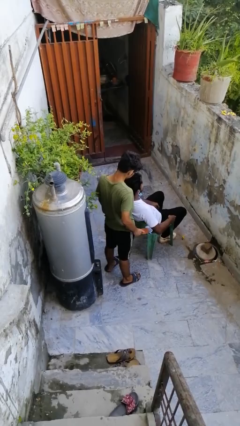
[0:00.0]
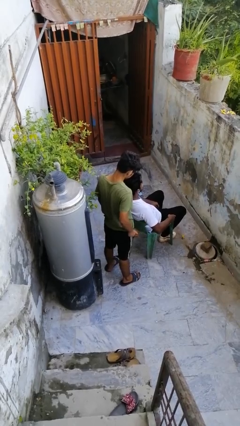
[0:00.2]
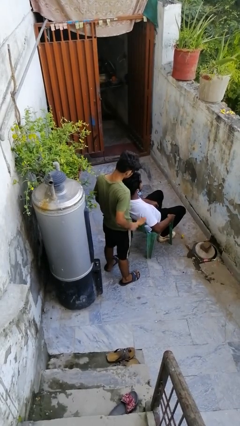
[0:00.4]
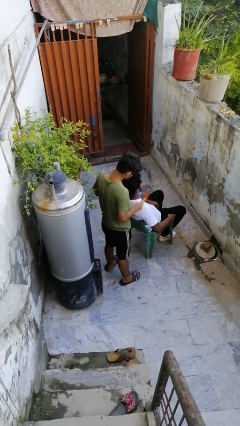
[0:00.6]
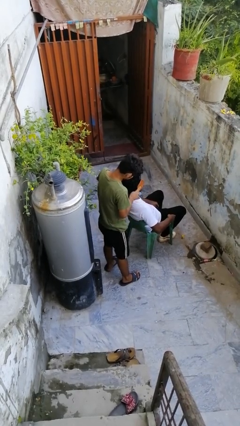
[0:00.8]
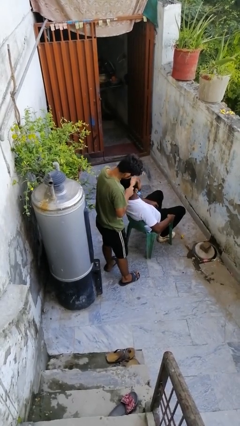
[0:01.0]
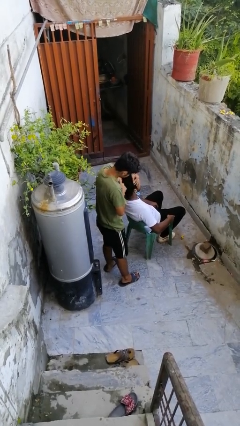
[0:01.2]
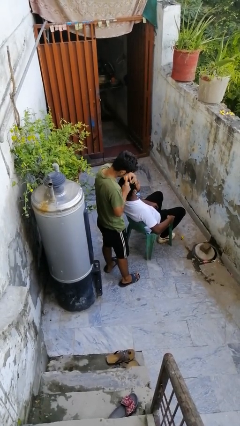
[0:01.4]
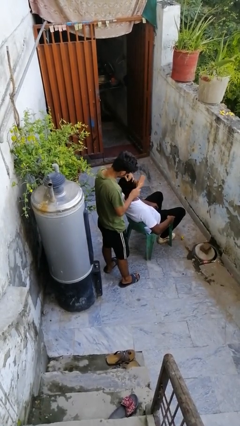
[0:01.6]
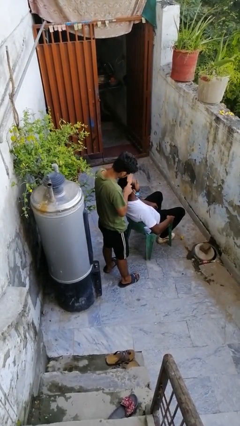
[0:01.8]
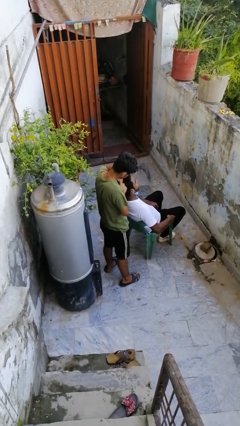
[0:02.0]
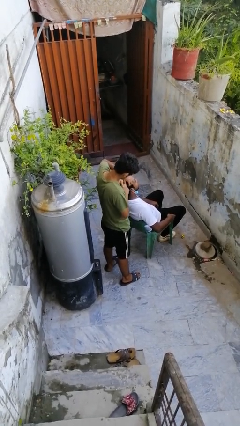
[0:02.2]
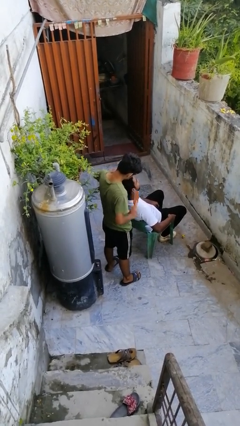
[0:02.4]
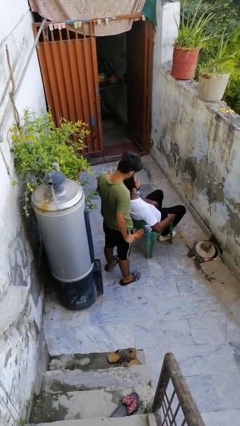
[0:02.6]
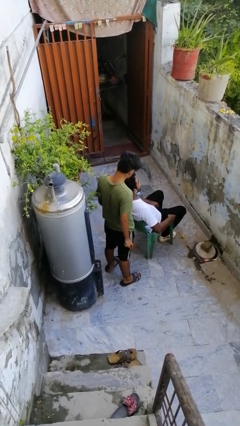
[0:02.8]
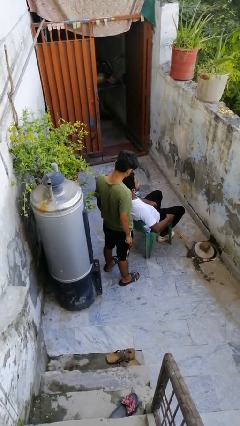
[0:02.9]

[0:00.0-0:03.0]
person brushes hair of person

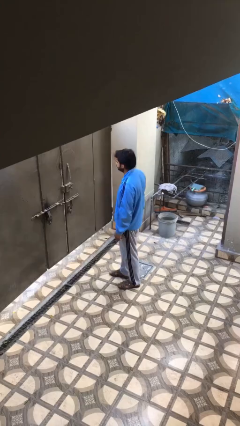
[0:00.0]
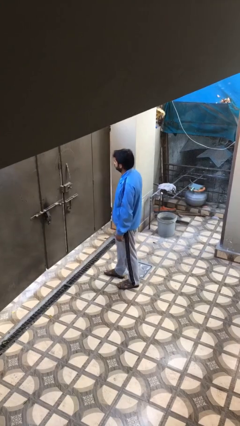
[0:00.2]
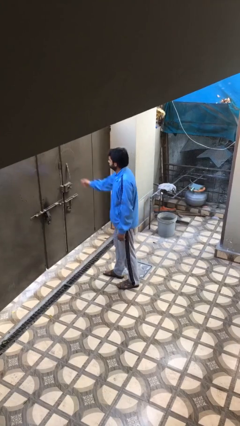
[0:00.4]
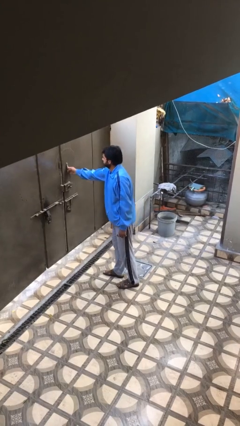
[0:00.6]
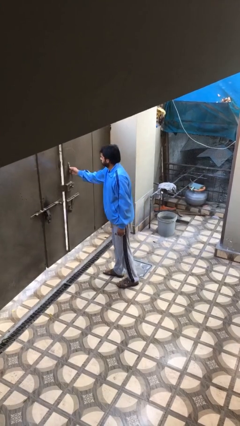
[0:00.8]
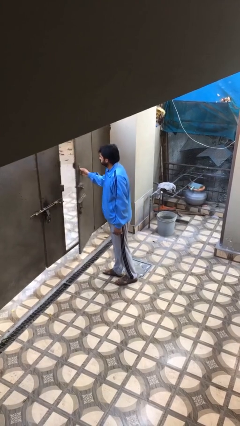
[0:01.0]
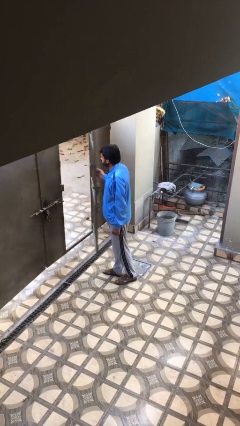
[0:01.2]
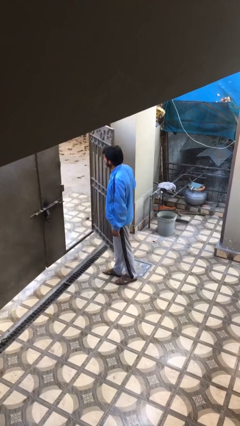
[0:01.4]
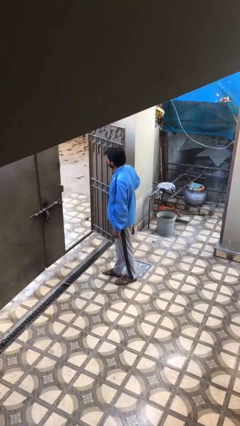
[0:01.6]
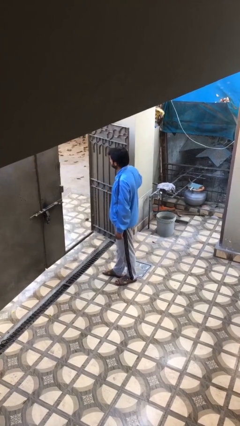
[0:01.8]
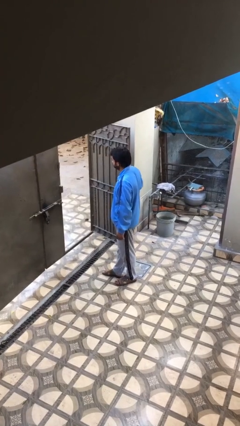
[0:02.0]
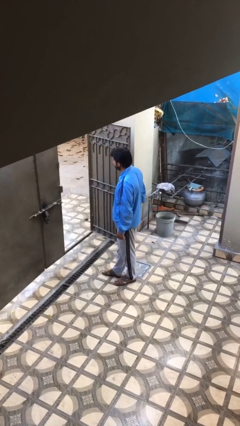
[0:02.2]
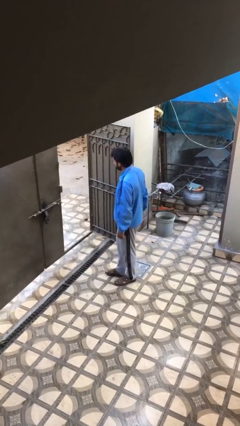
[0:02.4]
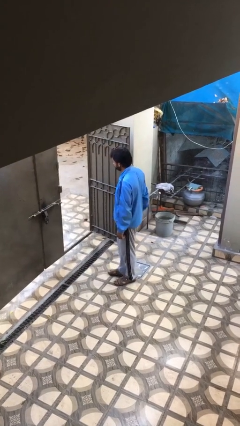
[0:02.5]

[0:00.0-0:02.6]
person opens facility door

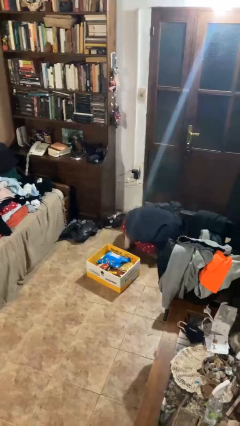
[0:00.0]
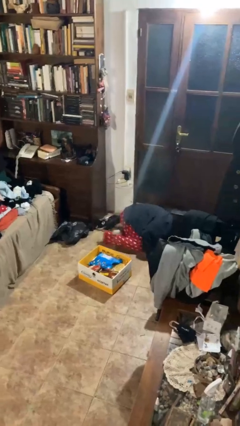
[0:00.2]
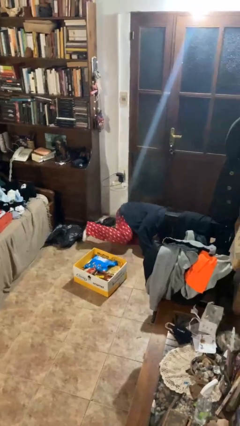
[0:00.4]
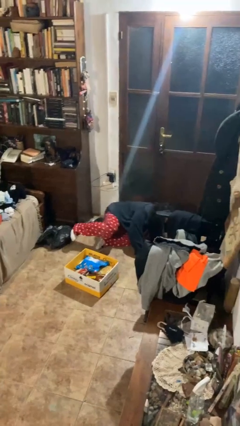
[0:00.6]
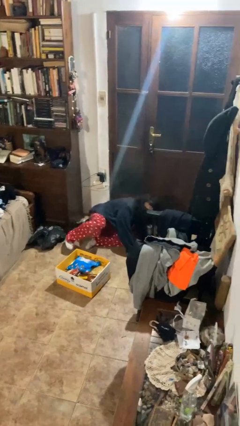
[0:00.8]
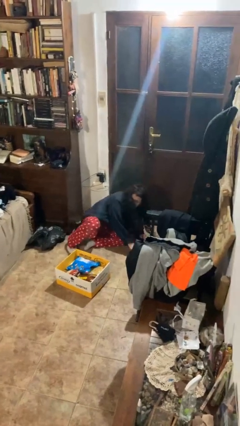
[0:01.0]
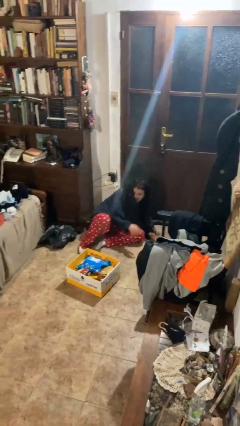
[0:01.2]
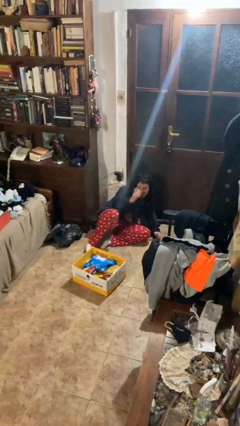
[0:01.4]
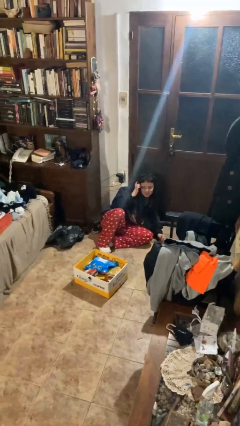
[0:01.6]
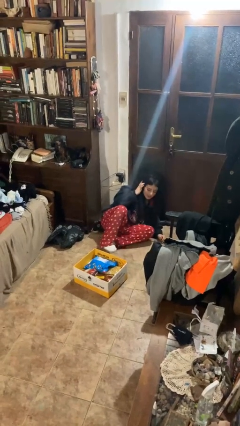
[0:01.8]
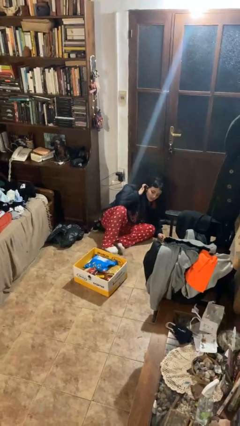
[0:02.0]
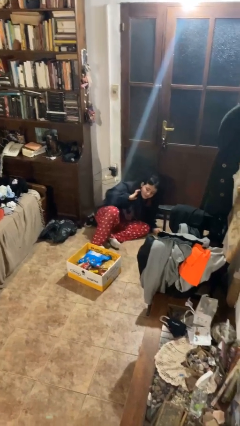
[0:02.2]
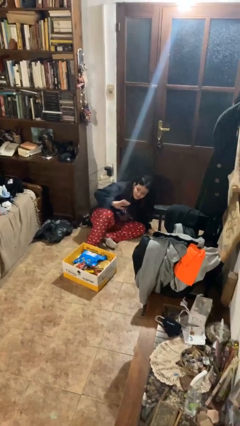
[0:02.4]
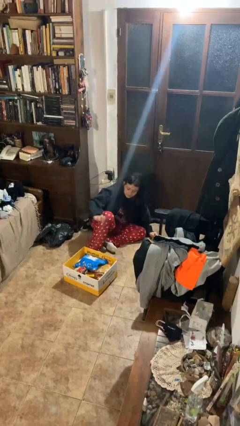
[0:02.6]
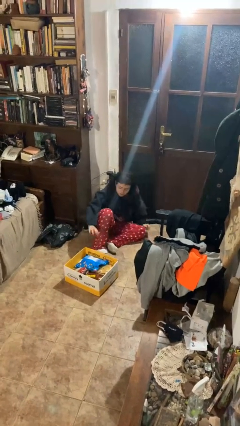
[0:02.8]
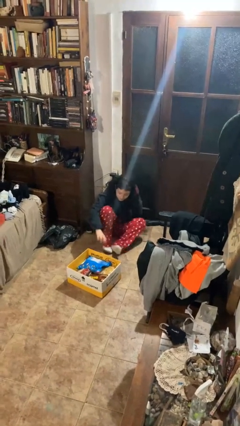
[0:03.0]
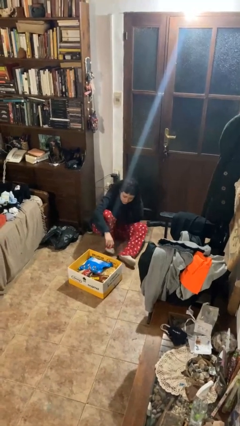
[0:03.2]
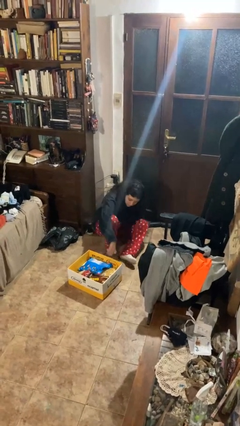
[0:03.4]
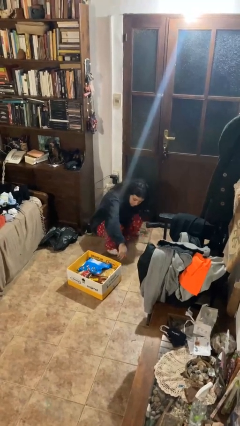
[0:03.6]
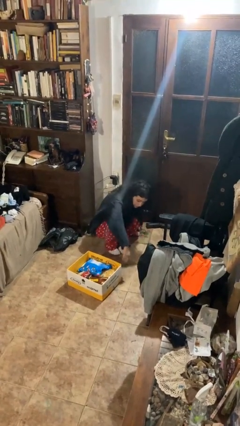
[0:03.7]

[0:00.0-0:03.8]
person lies down on floor

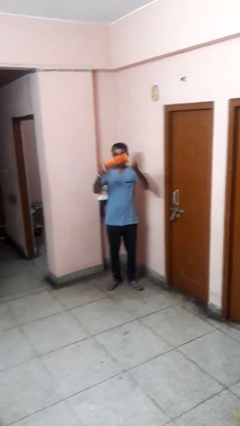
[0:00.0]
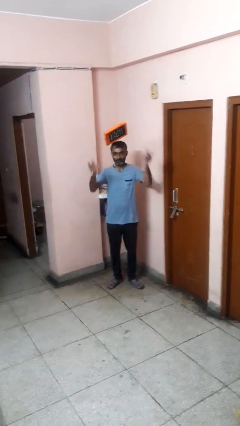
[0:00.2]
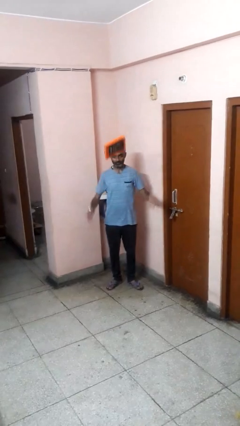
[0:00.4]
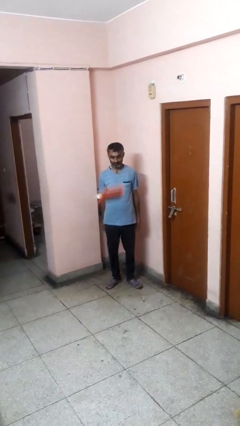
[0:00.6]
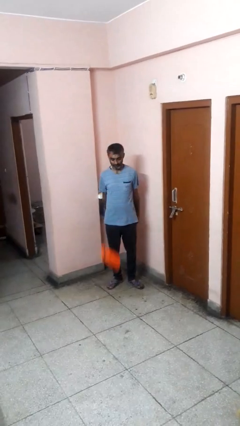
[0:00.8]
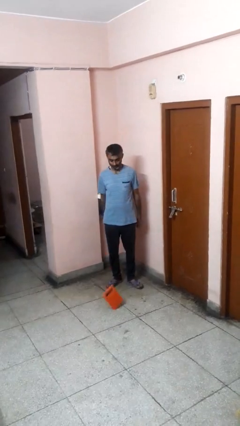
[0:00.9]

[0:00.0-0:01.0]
person throws object into air

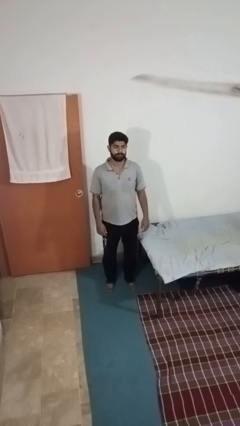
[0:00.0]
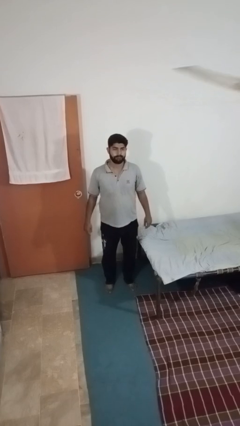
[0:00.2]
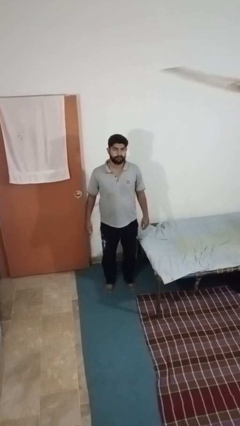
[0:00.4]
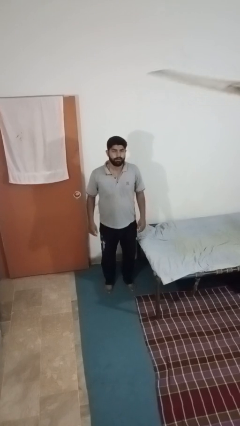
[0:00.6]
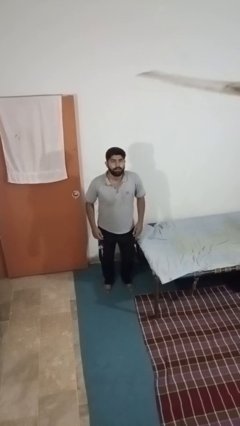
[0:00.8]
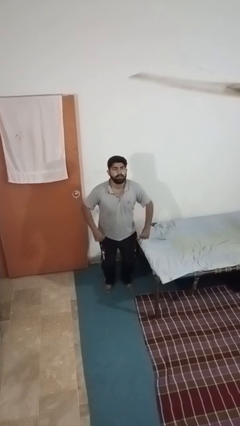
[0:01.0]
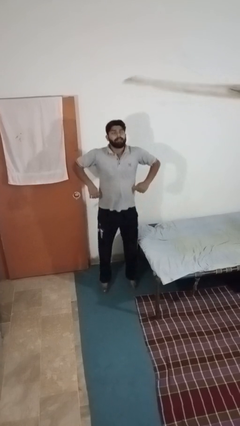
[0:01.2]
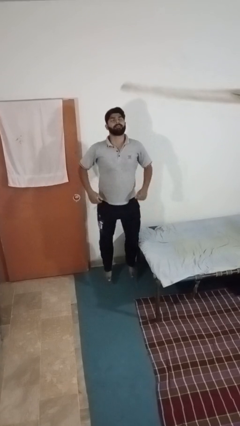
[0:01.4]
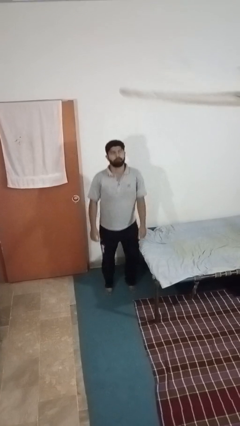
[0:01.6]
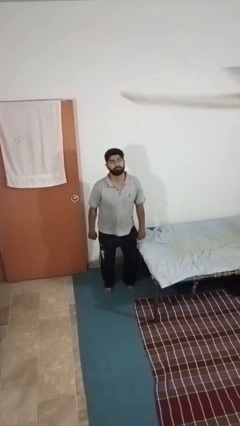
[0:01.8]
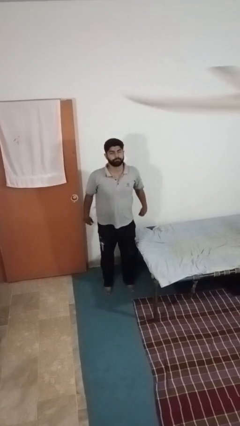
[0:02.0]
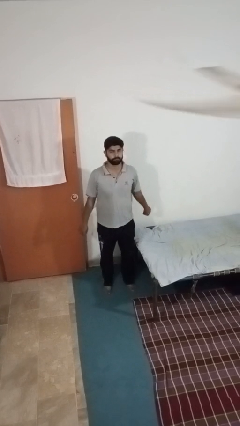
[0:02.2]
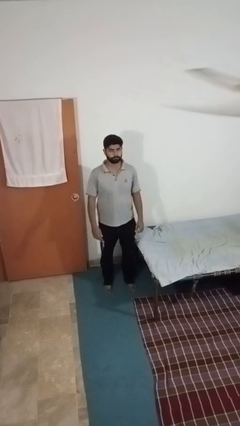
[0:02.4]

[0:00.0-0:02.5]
person jumps

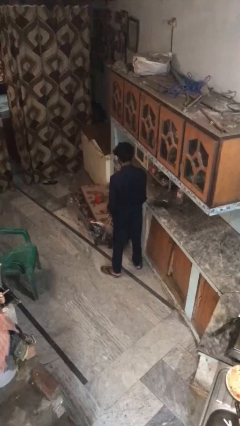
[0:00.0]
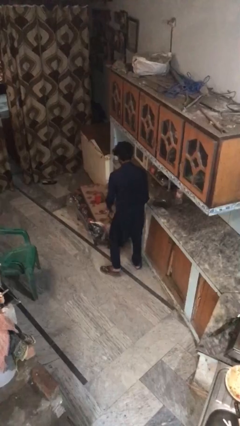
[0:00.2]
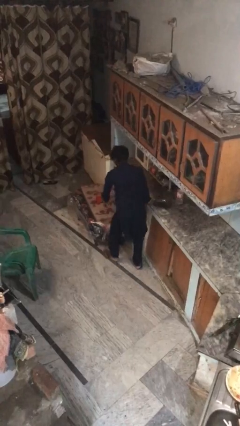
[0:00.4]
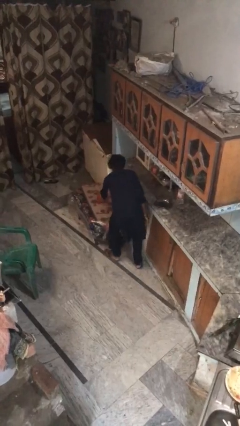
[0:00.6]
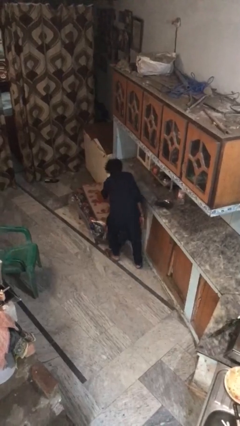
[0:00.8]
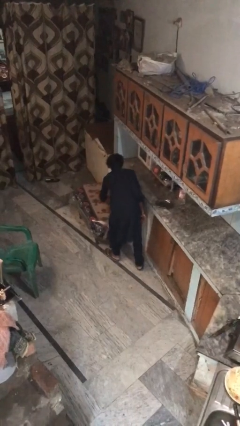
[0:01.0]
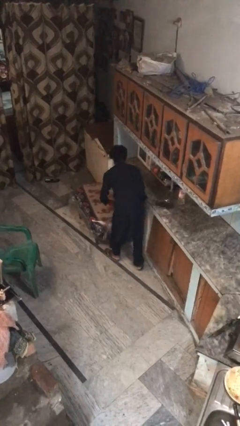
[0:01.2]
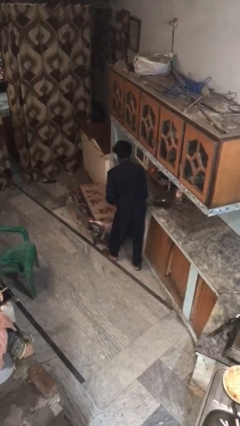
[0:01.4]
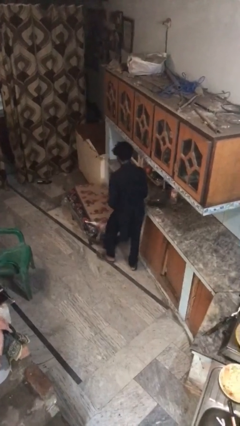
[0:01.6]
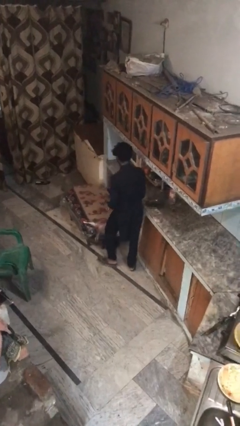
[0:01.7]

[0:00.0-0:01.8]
person picks up object from table

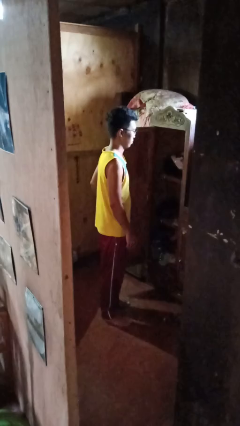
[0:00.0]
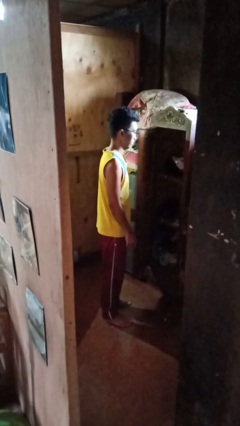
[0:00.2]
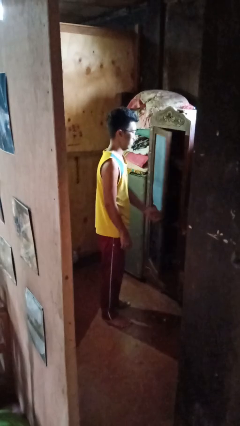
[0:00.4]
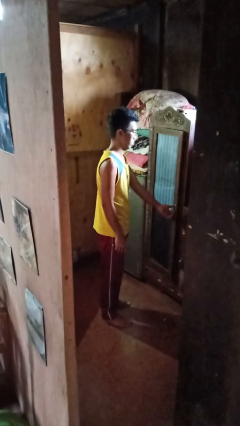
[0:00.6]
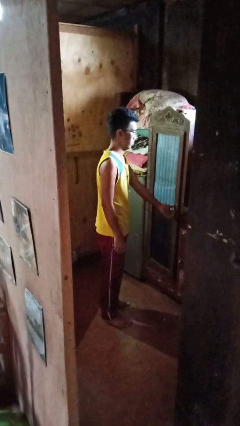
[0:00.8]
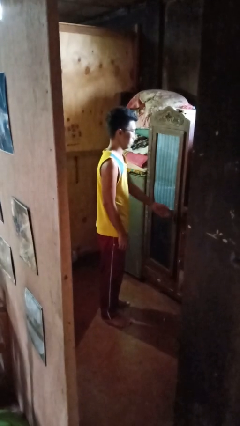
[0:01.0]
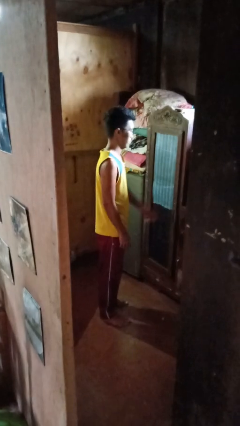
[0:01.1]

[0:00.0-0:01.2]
person closes closet door

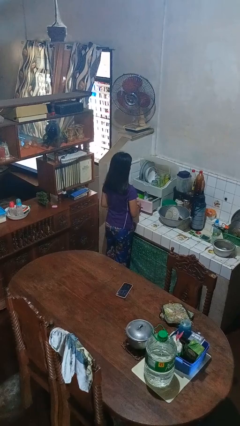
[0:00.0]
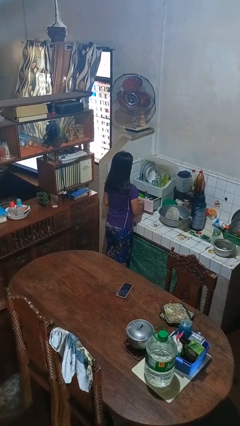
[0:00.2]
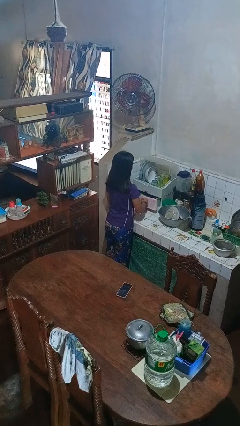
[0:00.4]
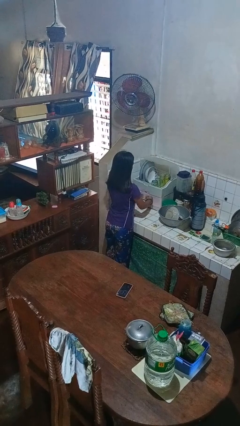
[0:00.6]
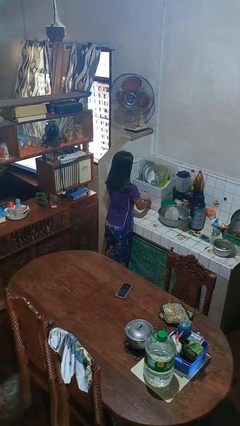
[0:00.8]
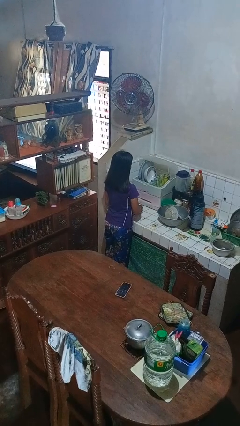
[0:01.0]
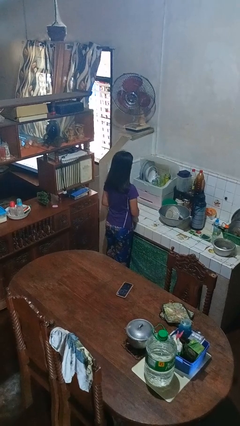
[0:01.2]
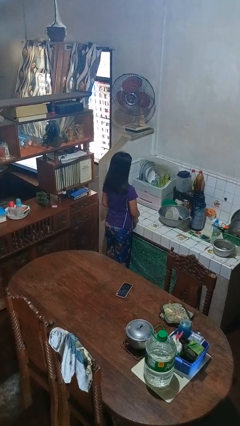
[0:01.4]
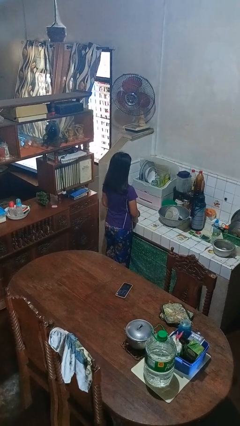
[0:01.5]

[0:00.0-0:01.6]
person closes kitchen drawer
